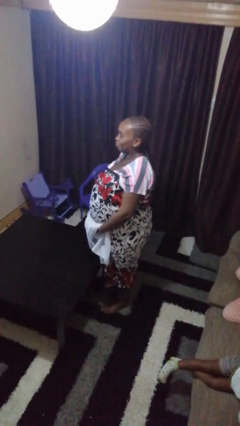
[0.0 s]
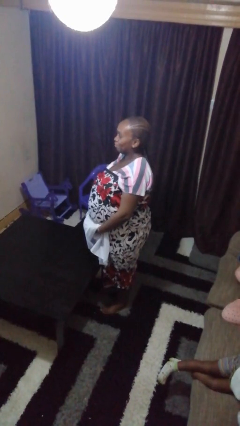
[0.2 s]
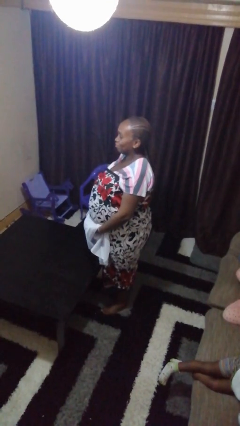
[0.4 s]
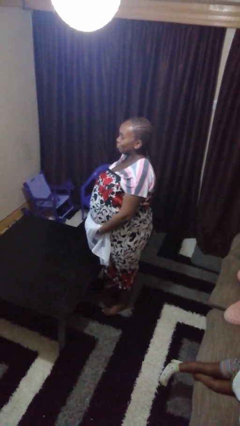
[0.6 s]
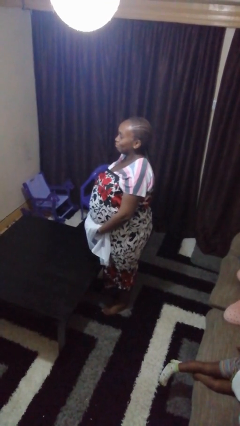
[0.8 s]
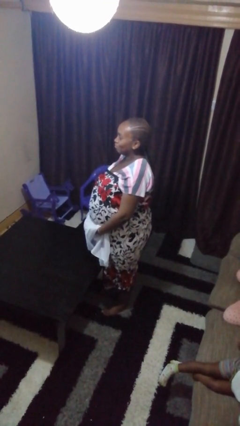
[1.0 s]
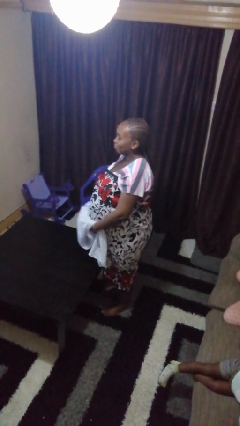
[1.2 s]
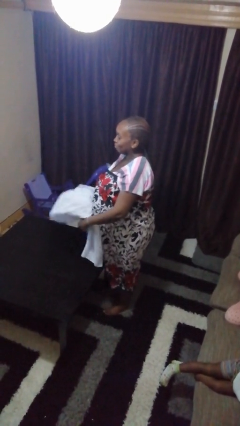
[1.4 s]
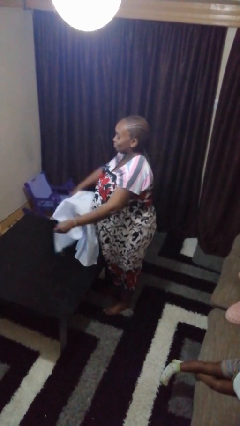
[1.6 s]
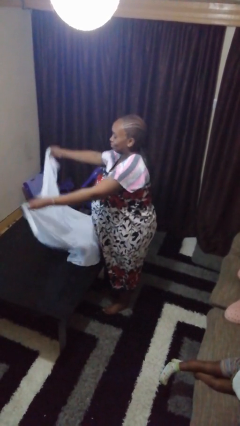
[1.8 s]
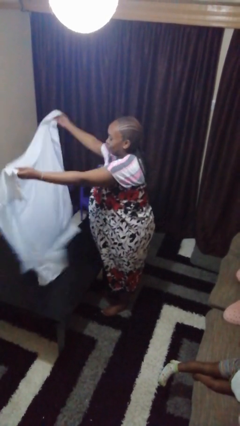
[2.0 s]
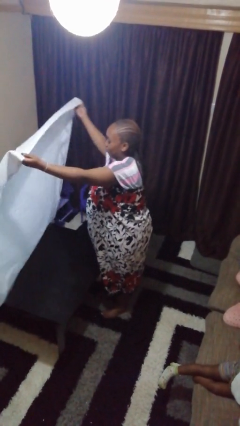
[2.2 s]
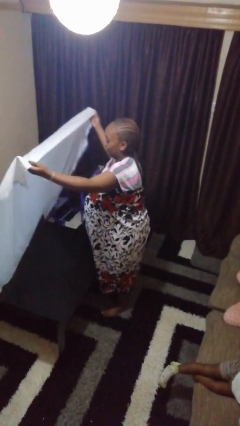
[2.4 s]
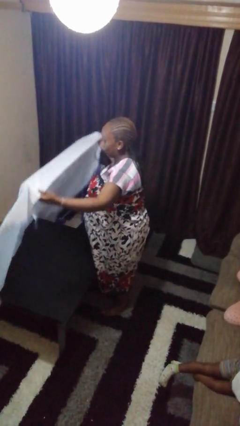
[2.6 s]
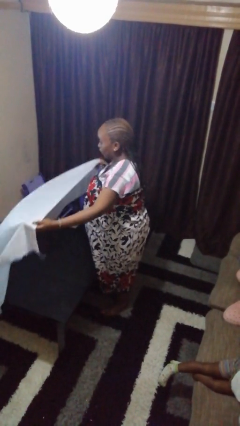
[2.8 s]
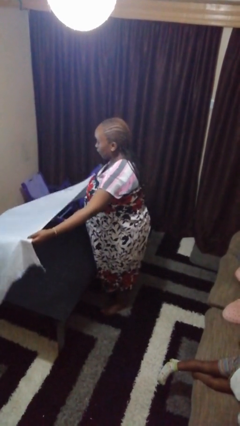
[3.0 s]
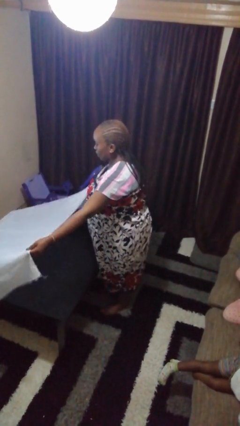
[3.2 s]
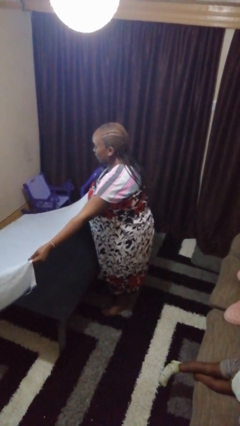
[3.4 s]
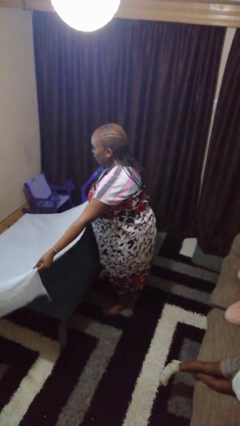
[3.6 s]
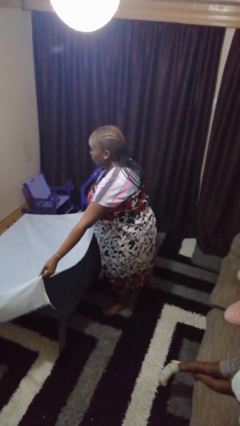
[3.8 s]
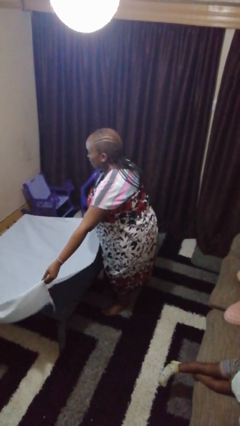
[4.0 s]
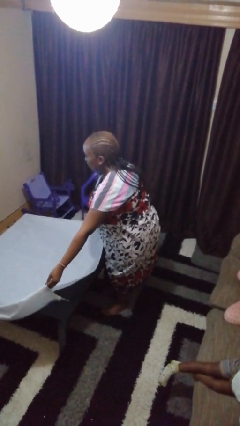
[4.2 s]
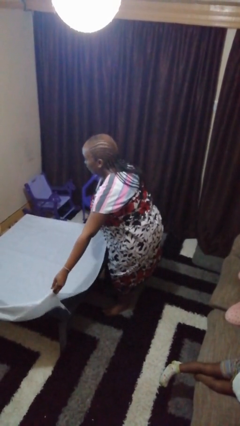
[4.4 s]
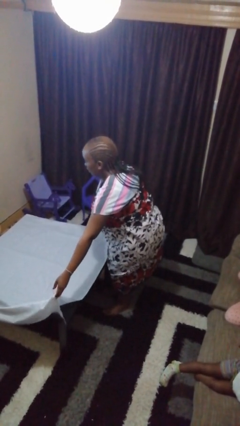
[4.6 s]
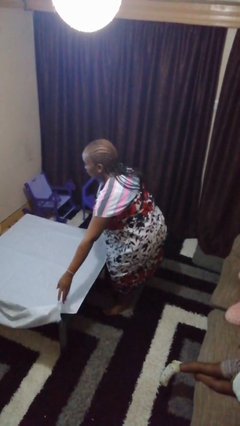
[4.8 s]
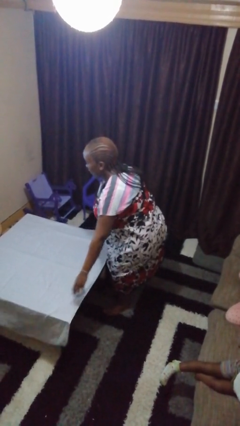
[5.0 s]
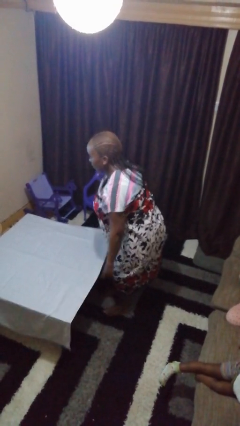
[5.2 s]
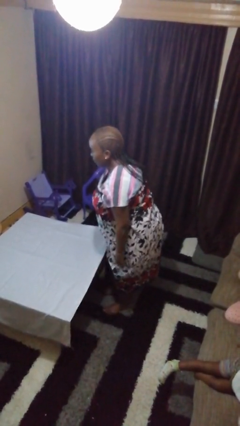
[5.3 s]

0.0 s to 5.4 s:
person spreads tablecloth

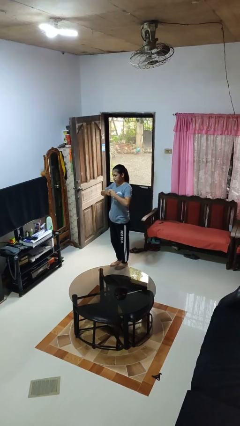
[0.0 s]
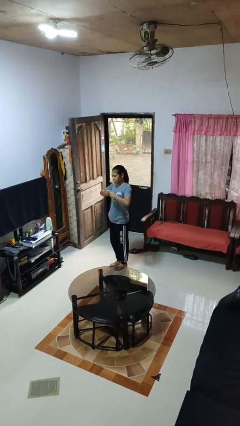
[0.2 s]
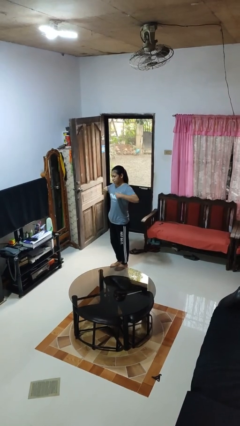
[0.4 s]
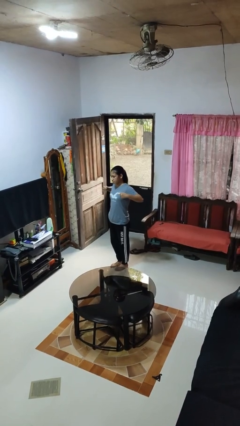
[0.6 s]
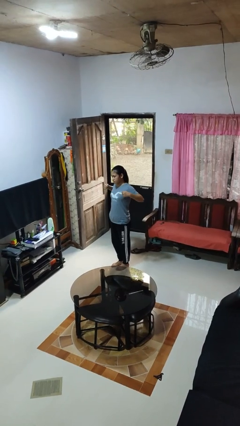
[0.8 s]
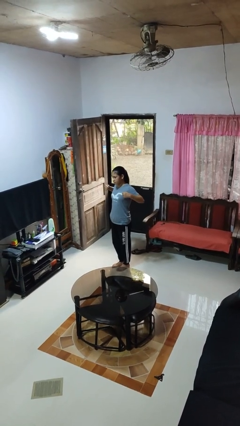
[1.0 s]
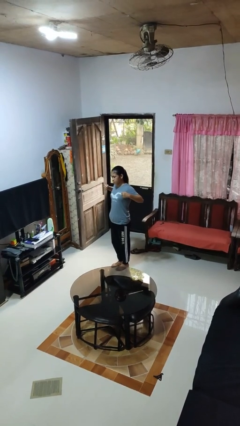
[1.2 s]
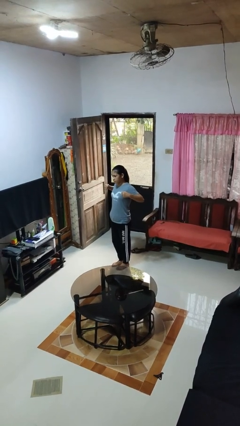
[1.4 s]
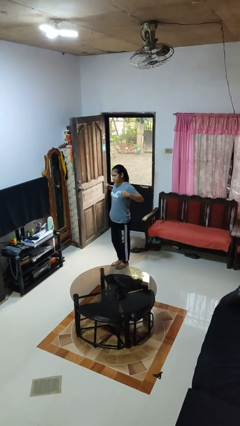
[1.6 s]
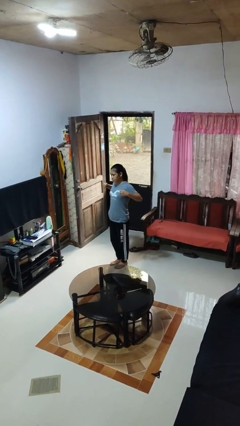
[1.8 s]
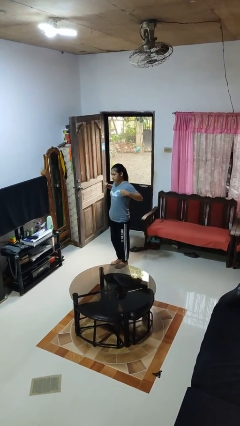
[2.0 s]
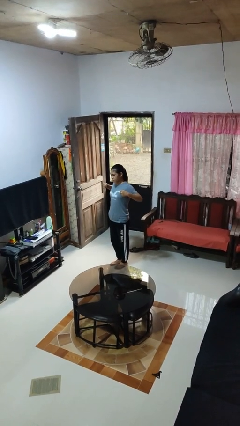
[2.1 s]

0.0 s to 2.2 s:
person gestures zoom in

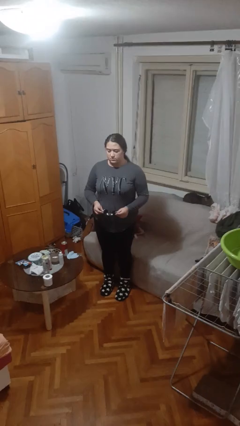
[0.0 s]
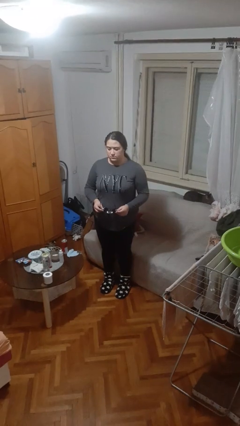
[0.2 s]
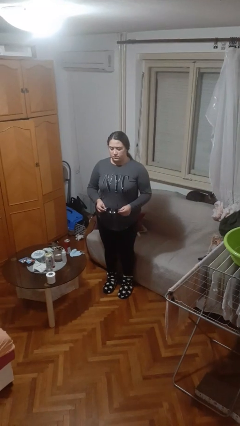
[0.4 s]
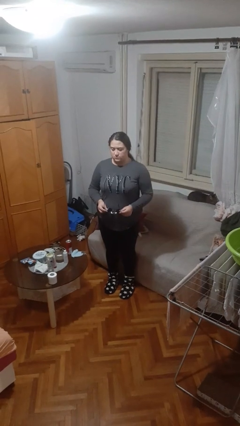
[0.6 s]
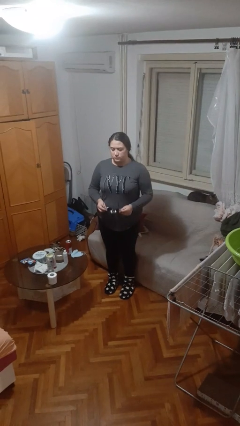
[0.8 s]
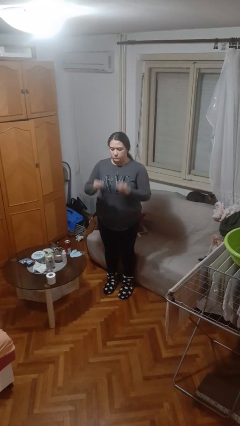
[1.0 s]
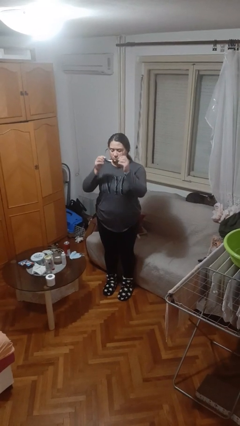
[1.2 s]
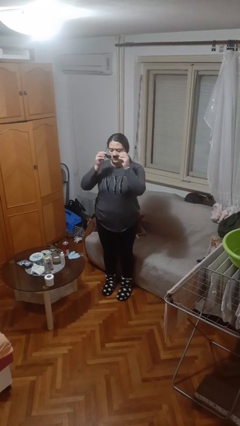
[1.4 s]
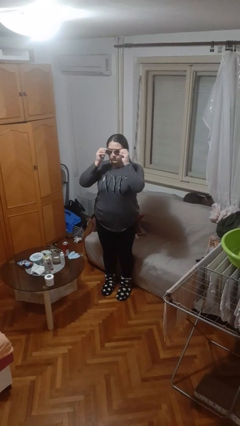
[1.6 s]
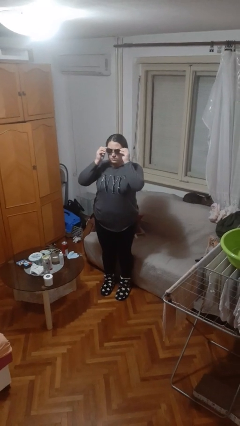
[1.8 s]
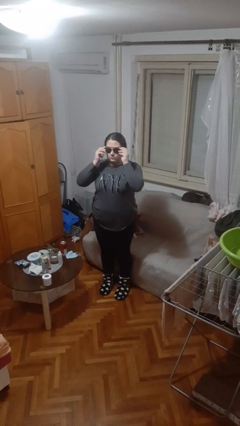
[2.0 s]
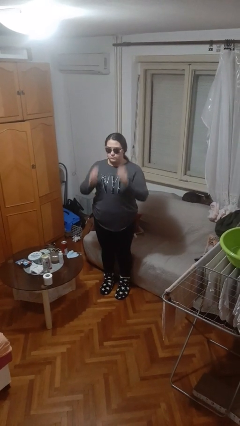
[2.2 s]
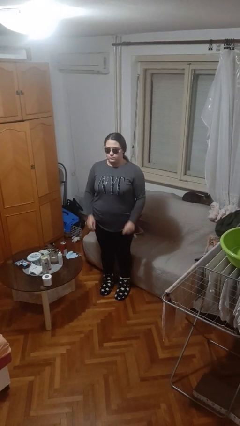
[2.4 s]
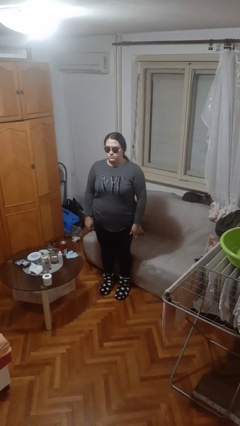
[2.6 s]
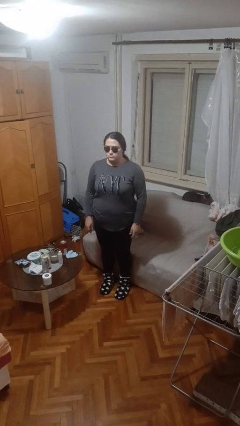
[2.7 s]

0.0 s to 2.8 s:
person puts on sunglasses

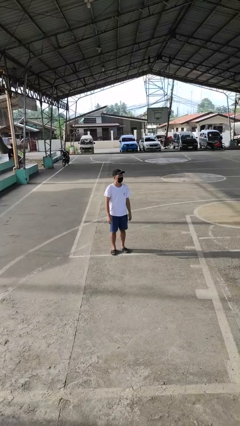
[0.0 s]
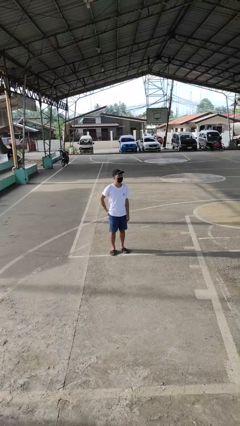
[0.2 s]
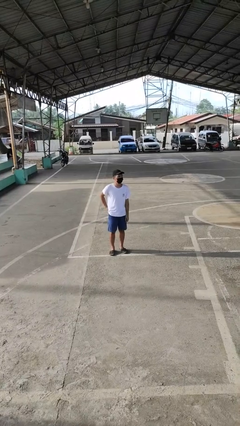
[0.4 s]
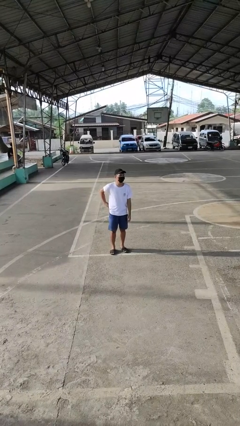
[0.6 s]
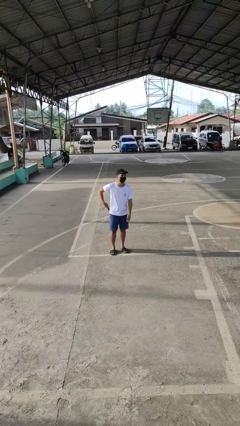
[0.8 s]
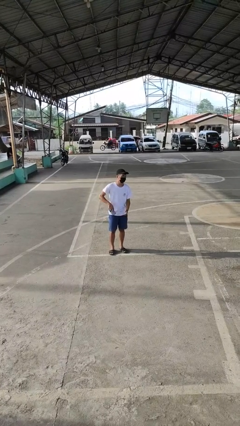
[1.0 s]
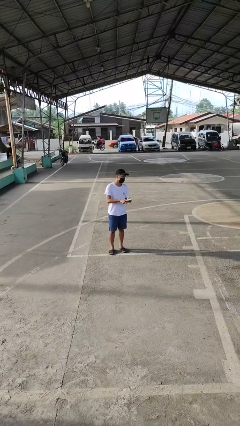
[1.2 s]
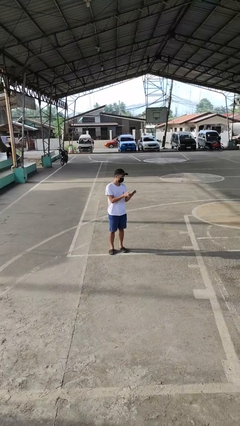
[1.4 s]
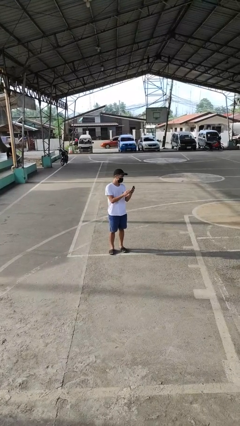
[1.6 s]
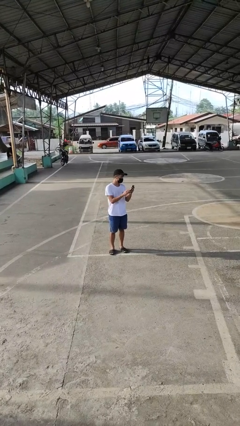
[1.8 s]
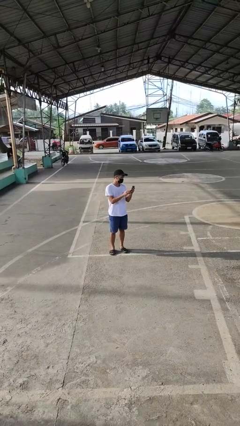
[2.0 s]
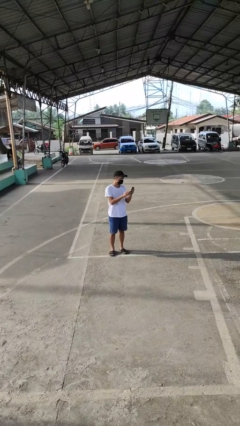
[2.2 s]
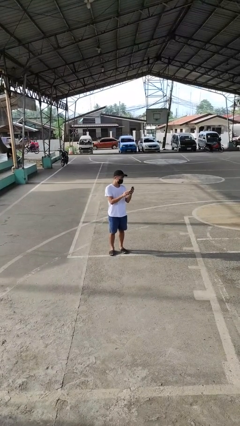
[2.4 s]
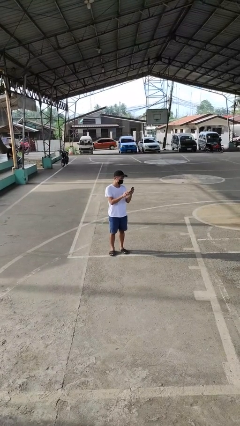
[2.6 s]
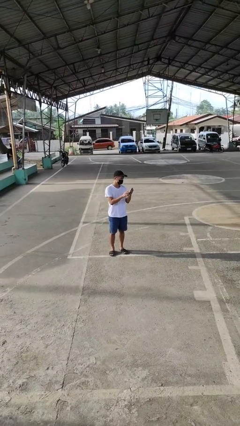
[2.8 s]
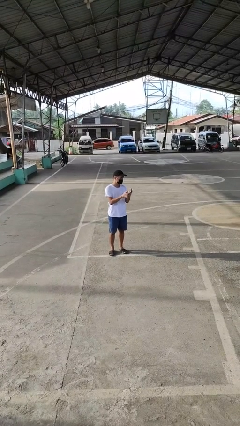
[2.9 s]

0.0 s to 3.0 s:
person takes phone from pocket

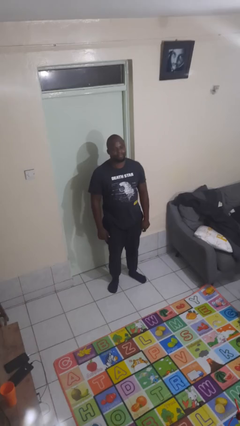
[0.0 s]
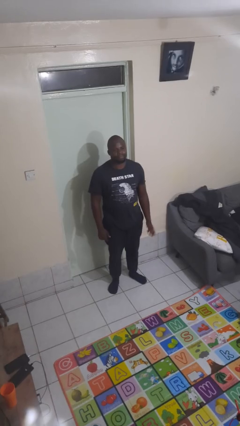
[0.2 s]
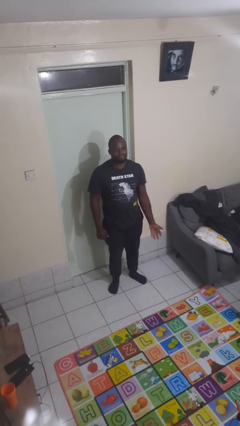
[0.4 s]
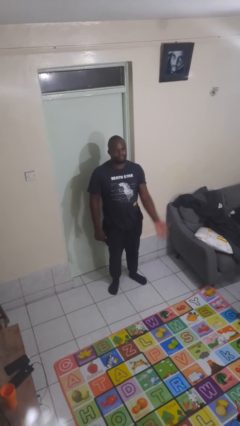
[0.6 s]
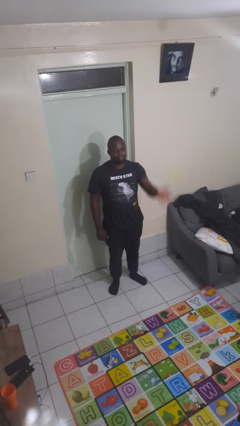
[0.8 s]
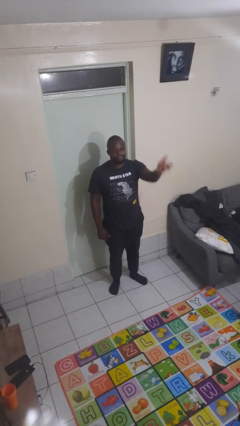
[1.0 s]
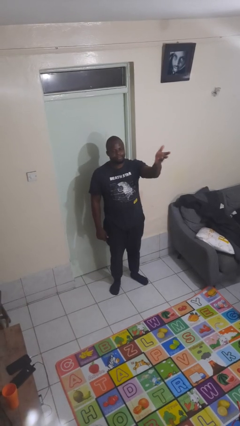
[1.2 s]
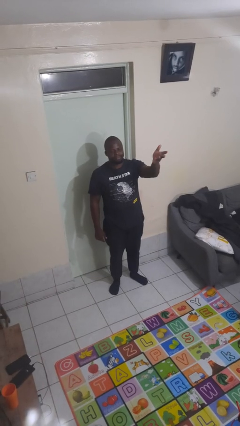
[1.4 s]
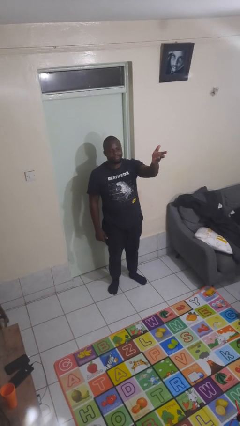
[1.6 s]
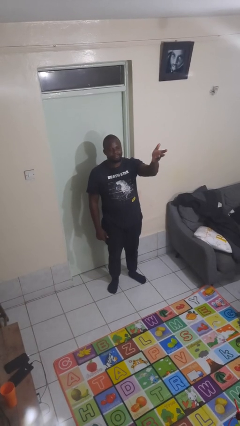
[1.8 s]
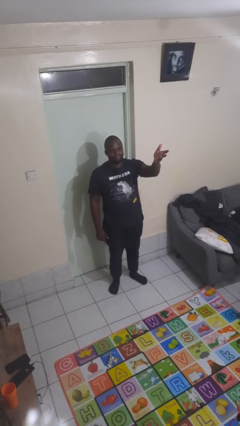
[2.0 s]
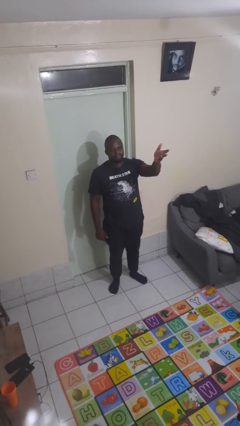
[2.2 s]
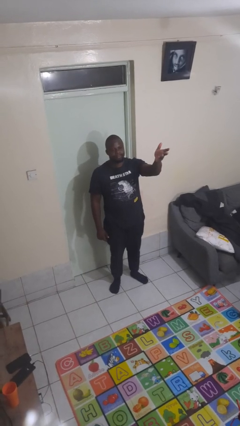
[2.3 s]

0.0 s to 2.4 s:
person gestures swipe up

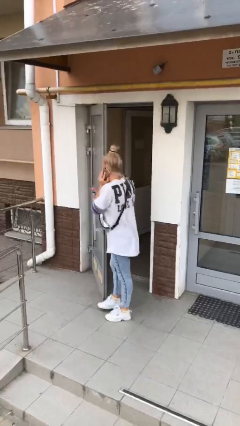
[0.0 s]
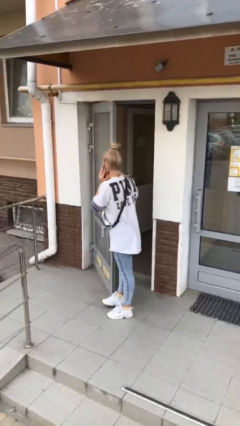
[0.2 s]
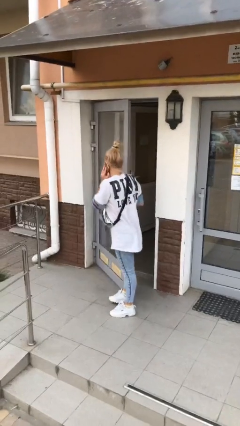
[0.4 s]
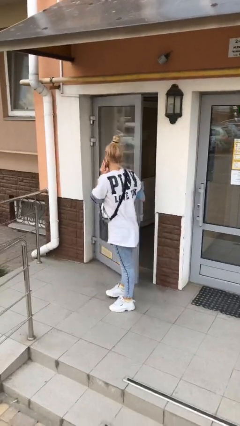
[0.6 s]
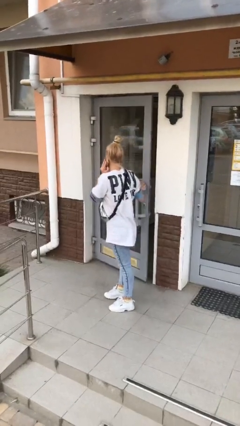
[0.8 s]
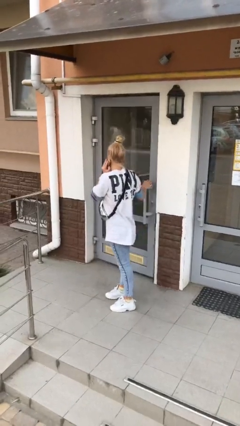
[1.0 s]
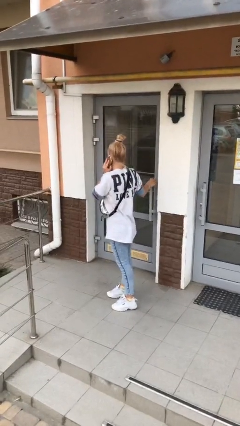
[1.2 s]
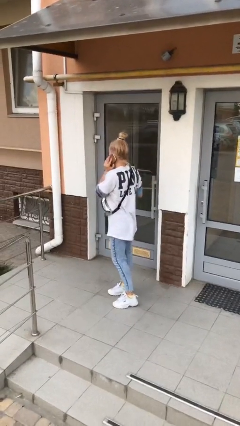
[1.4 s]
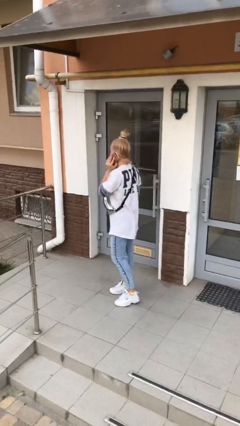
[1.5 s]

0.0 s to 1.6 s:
person closes facility door

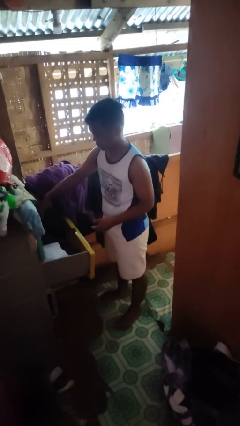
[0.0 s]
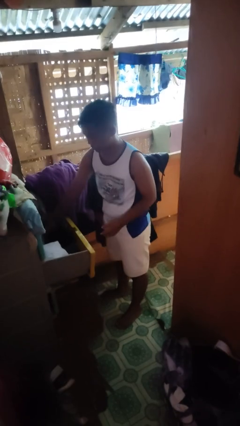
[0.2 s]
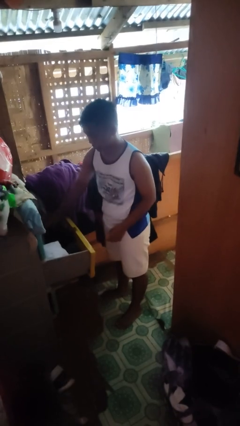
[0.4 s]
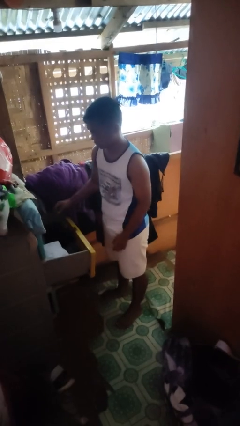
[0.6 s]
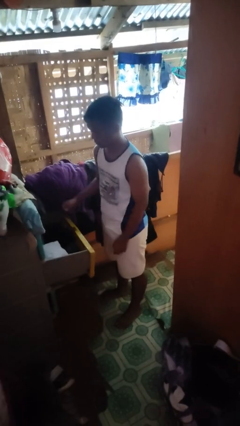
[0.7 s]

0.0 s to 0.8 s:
person puts clothes into dresser
